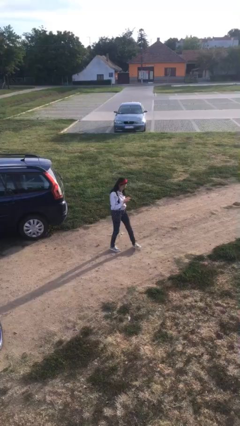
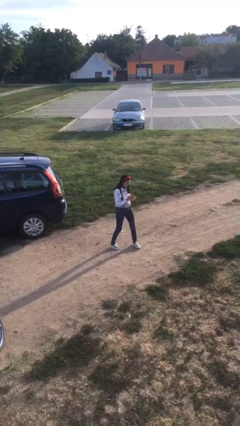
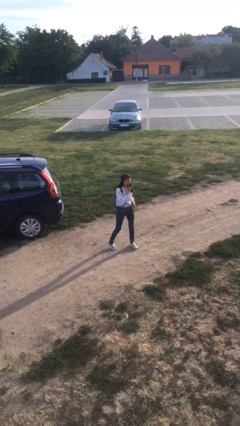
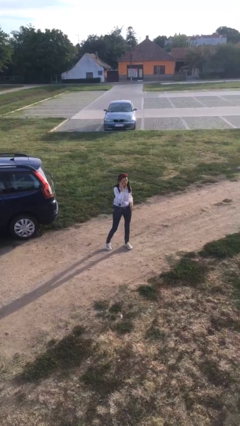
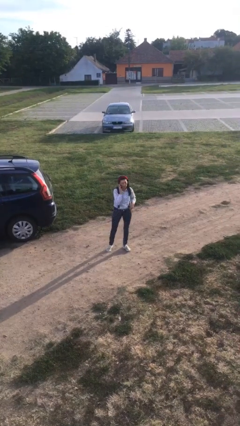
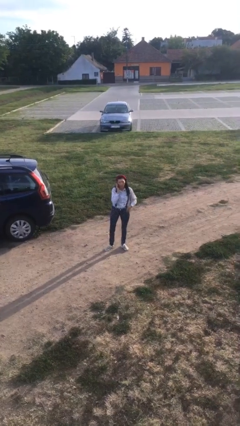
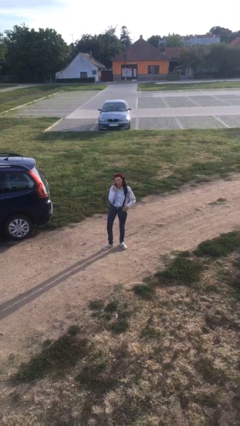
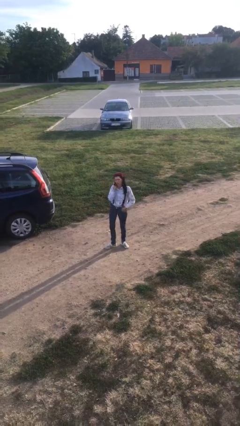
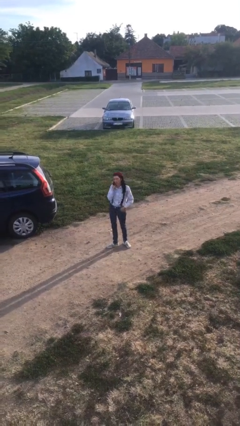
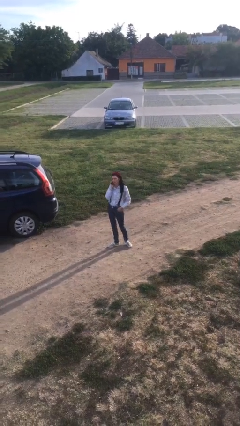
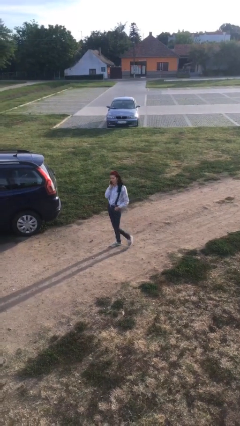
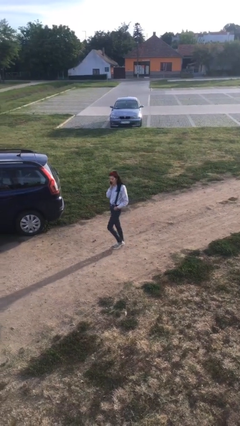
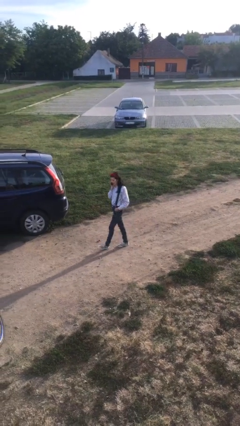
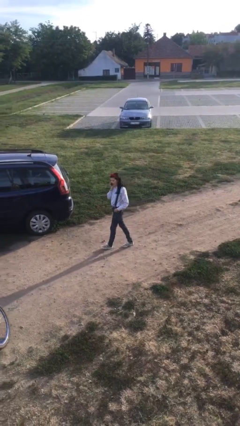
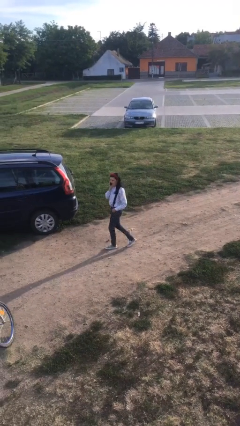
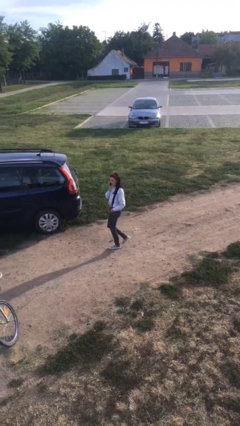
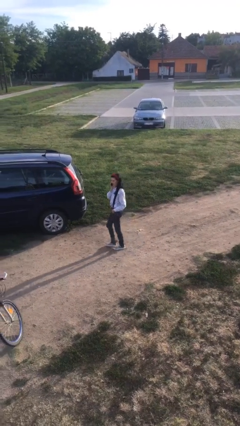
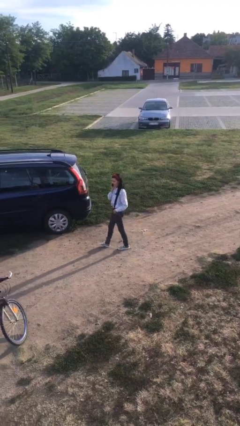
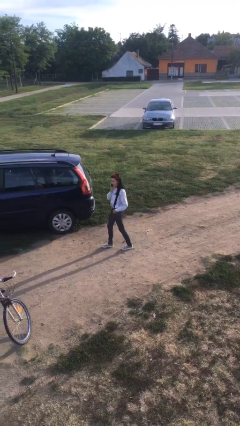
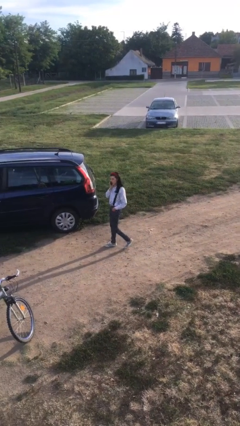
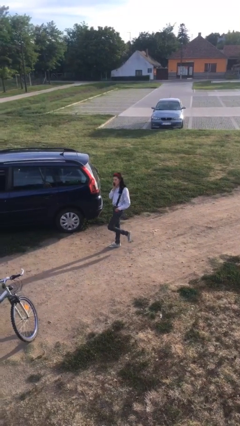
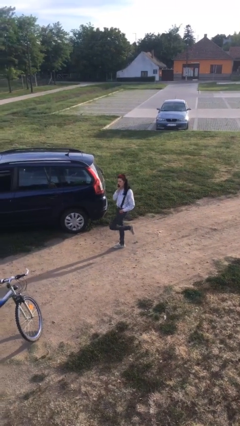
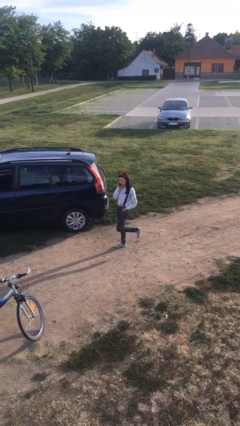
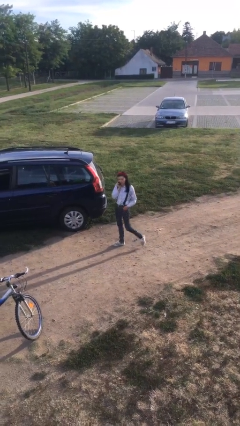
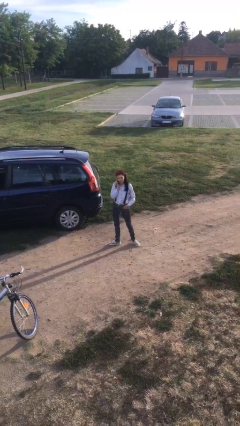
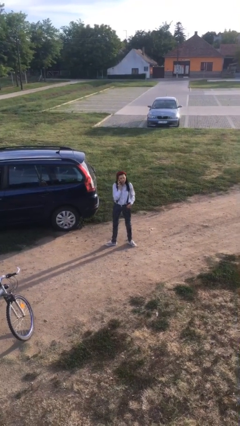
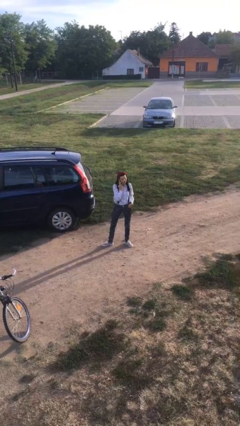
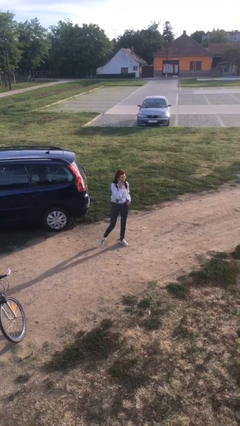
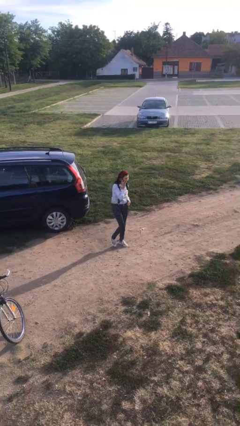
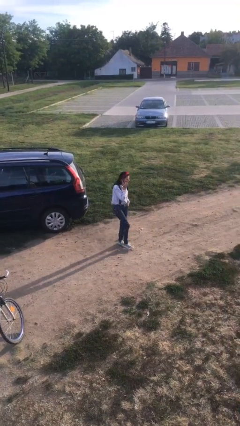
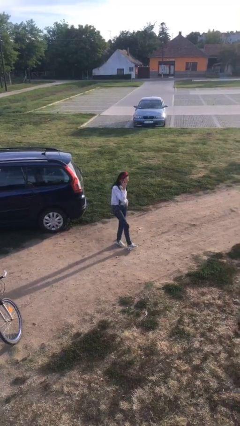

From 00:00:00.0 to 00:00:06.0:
person talks on phone

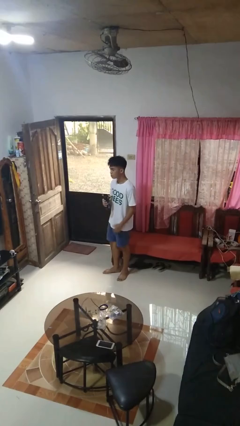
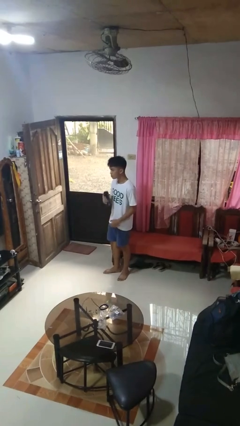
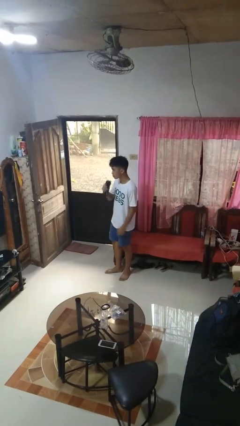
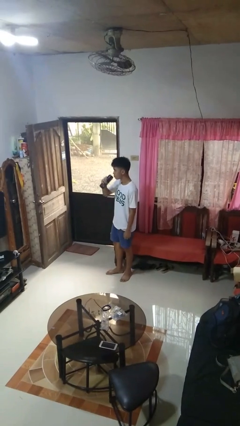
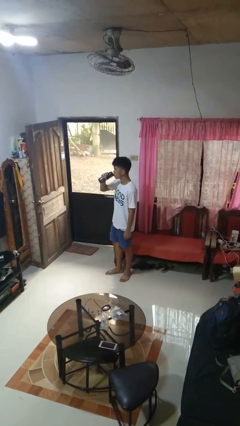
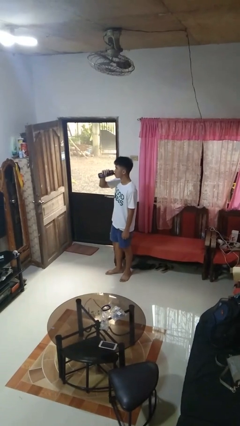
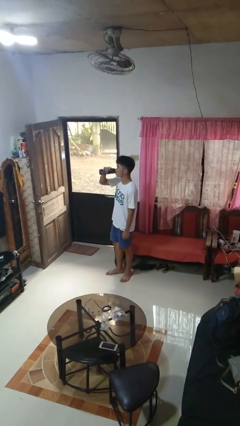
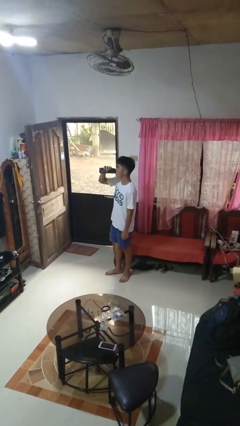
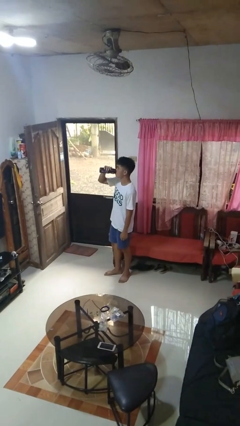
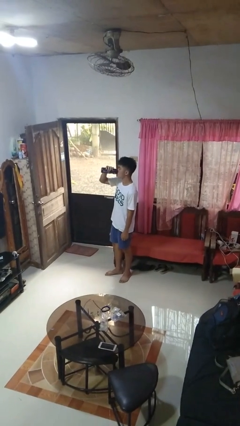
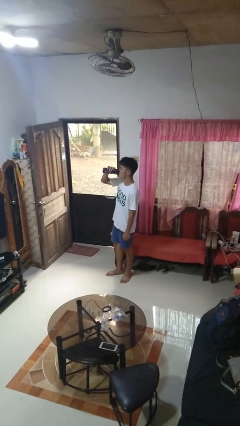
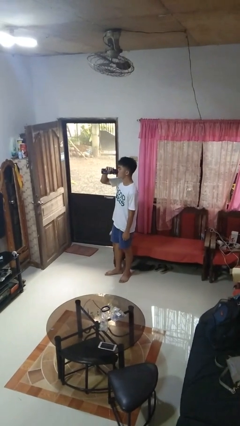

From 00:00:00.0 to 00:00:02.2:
person drinks from bottle

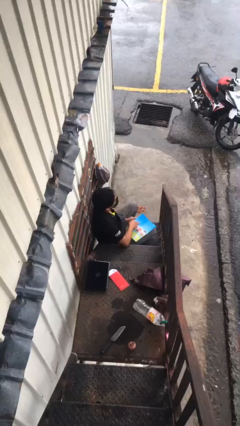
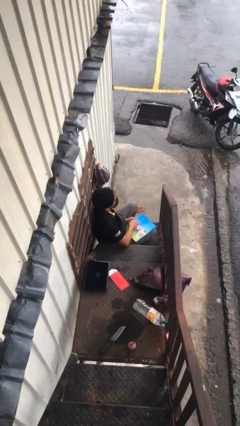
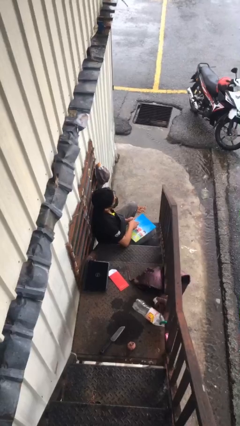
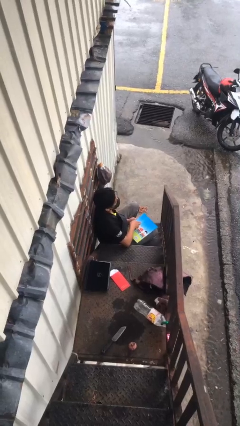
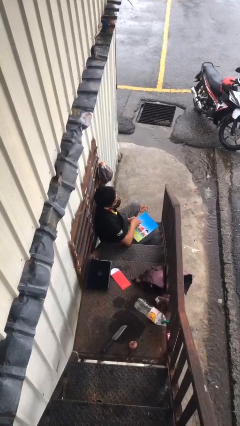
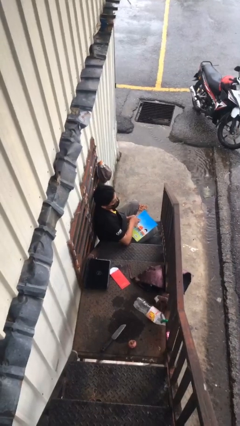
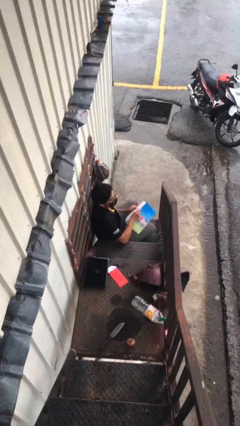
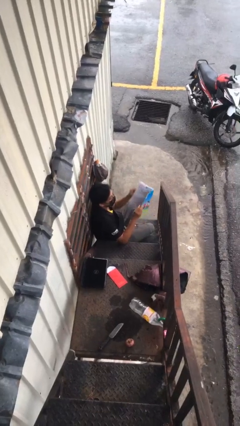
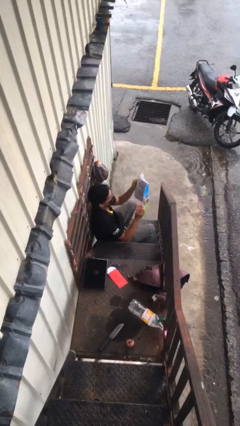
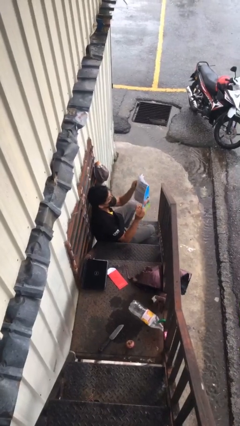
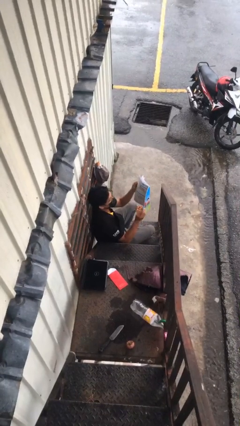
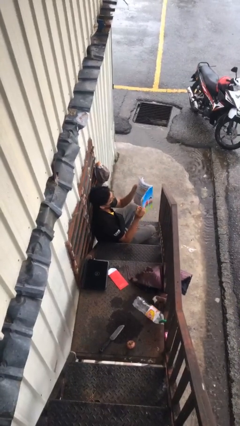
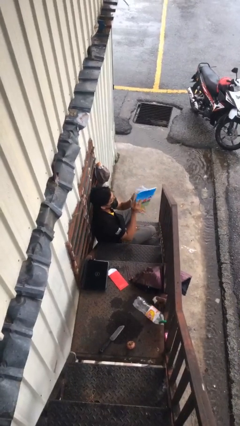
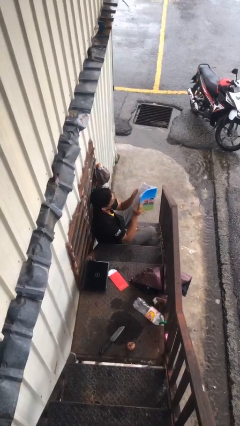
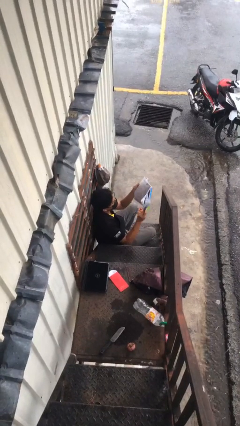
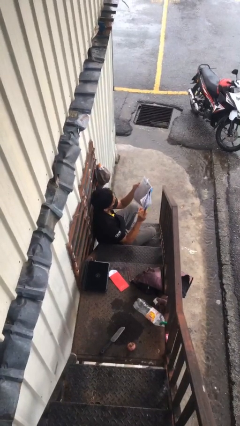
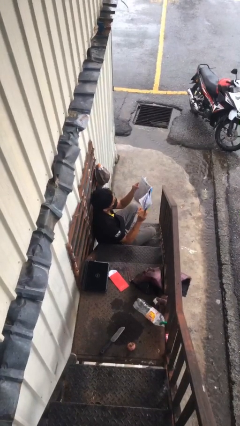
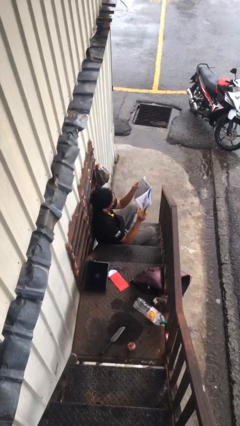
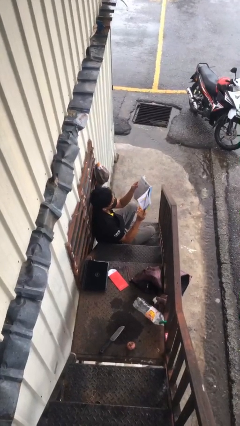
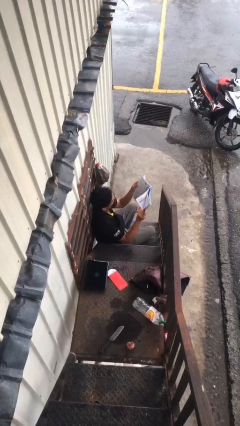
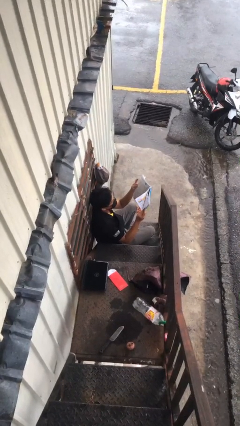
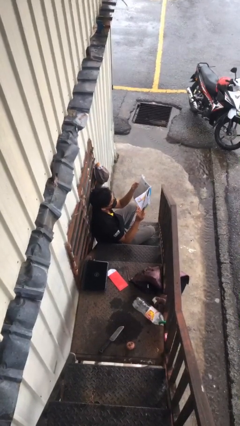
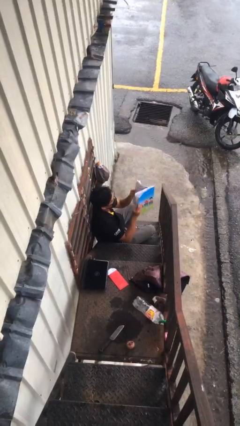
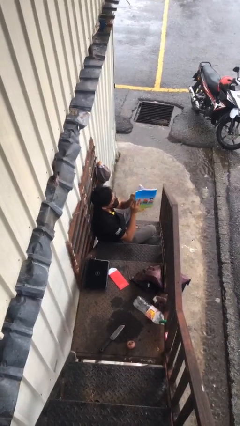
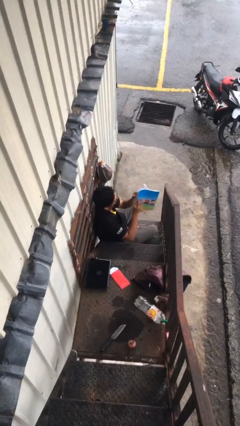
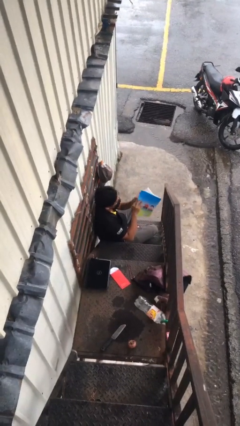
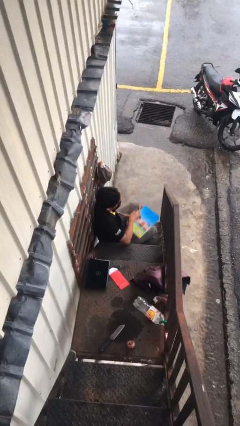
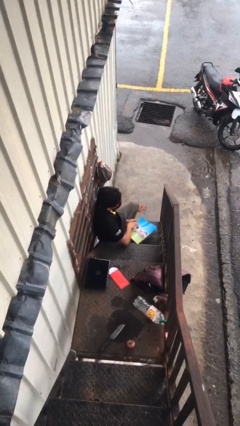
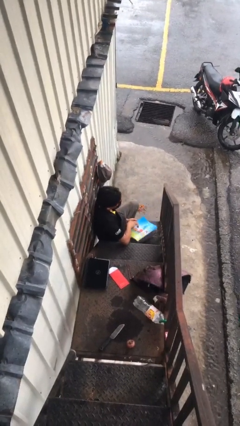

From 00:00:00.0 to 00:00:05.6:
person reads document

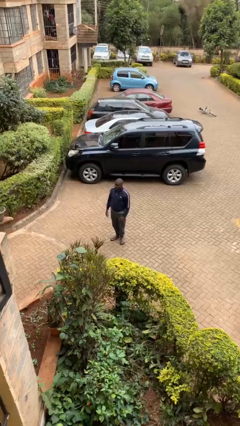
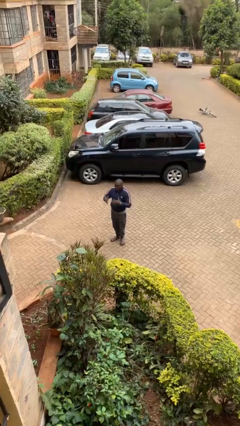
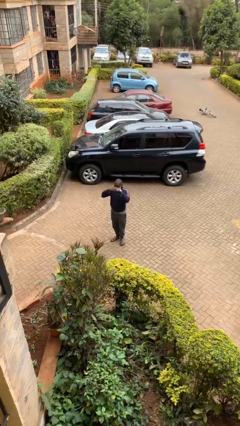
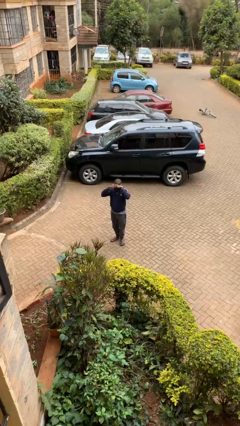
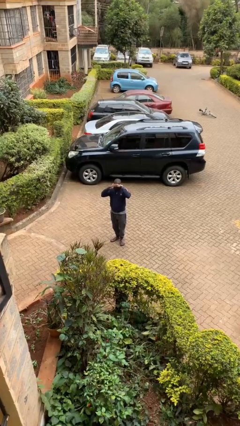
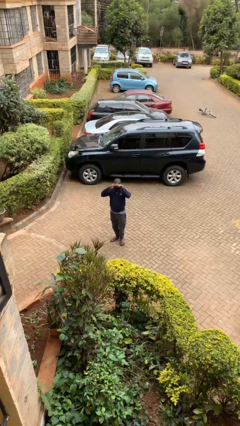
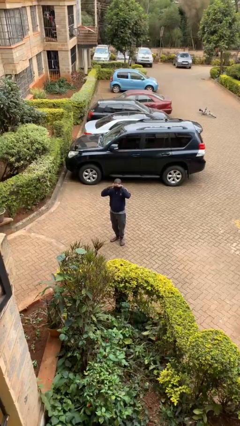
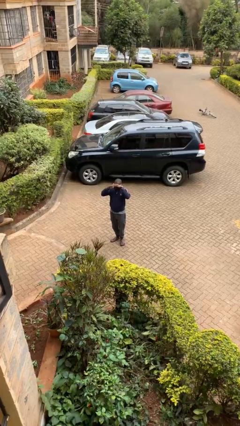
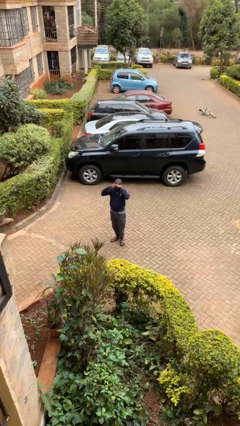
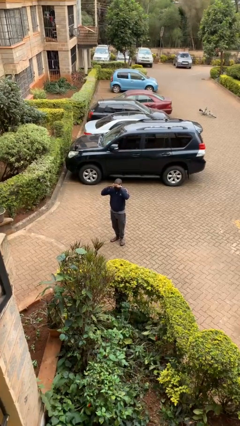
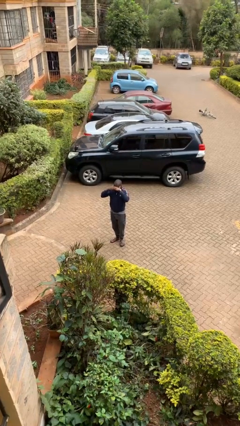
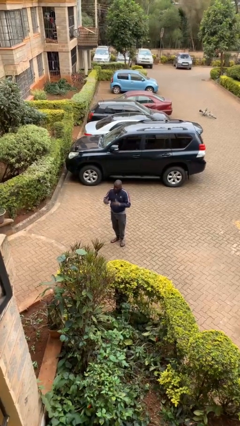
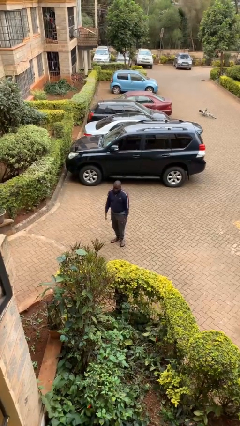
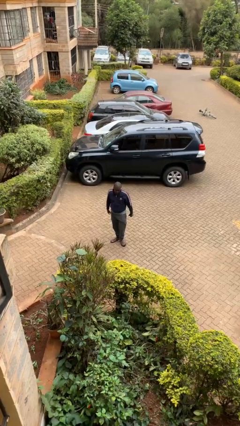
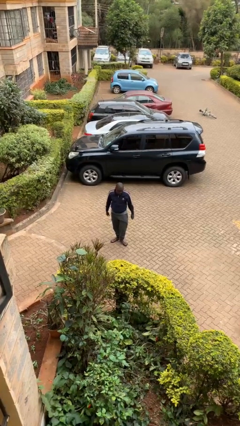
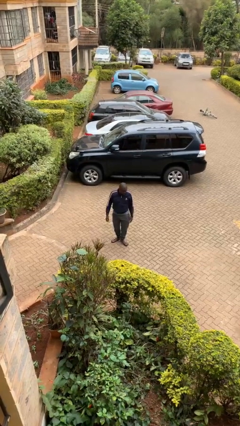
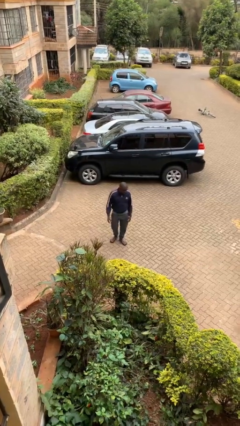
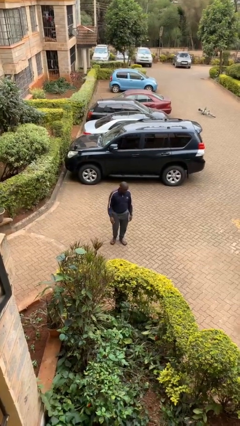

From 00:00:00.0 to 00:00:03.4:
person shades eyes

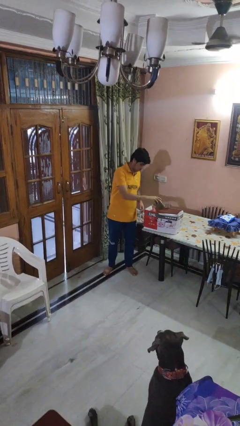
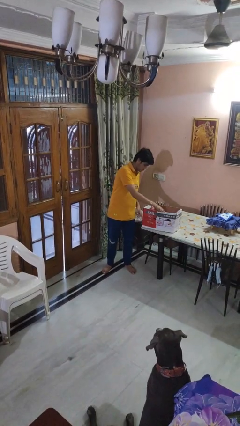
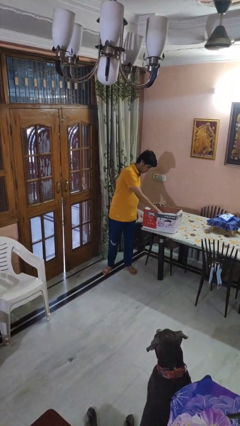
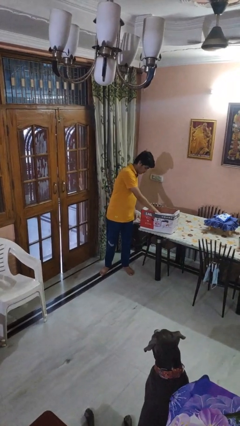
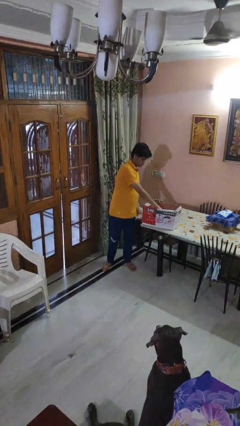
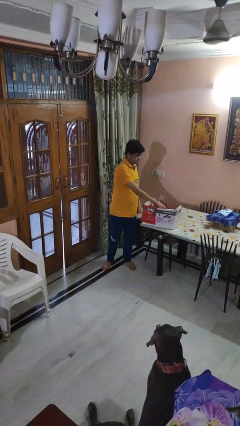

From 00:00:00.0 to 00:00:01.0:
person puts object into box
